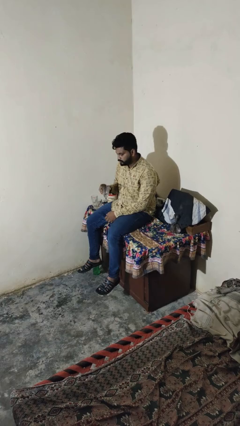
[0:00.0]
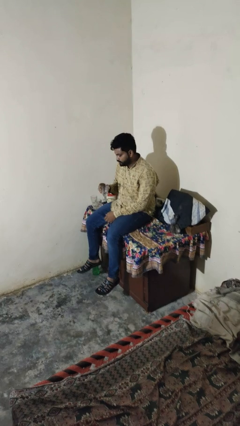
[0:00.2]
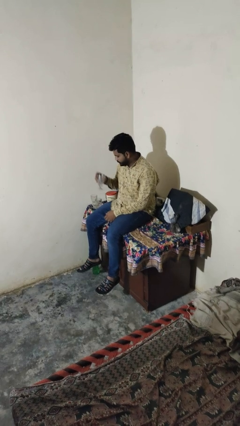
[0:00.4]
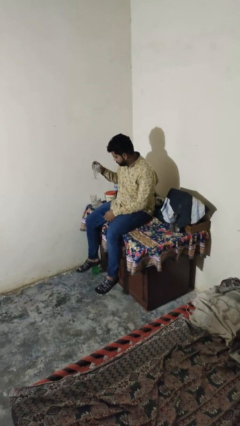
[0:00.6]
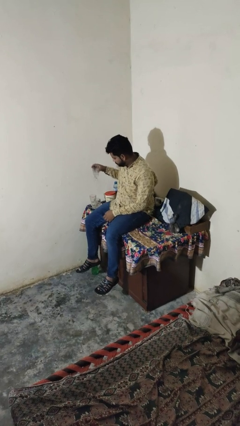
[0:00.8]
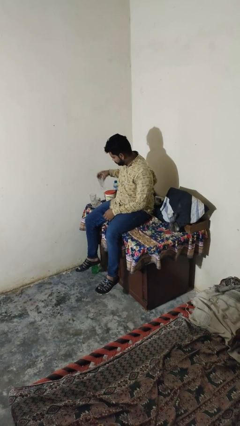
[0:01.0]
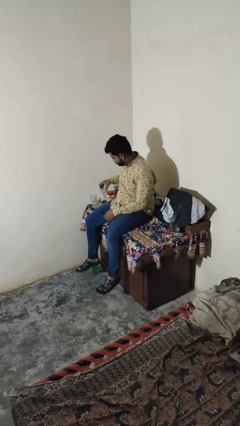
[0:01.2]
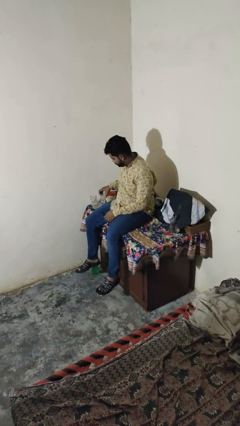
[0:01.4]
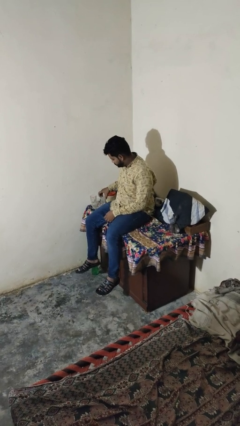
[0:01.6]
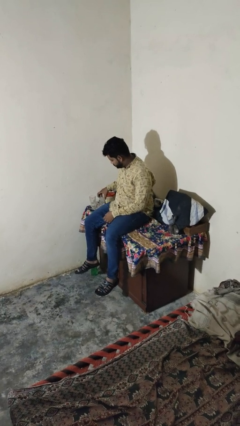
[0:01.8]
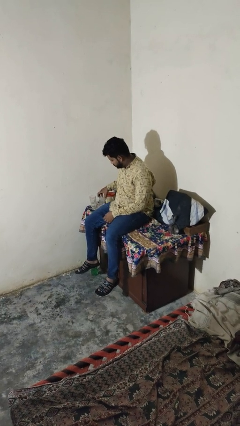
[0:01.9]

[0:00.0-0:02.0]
person puts down object on table

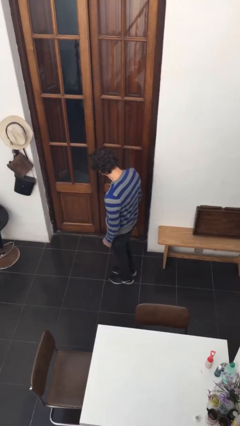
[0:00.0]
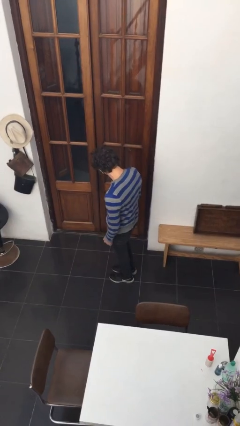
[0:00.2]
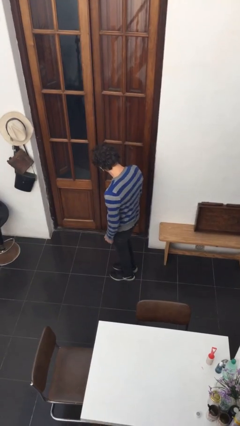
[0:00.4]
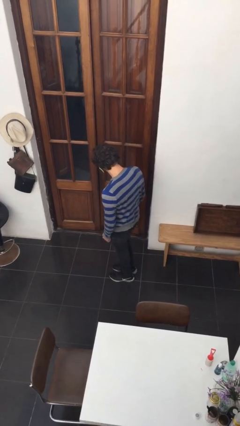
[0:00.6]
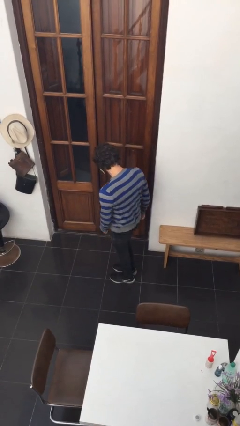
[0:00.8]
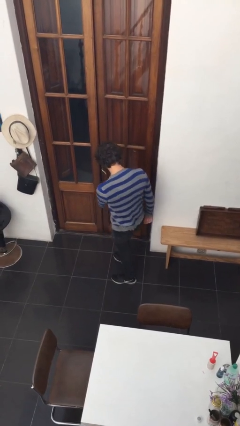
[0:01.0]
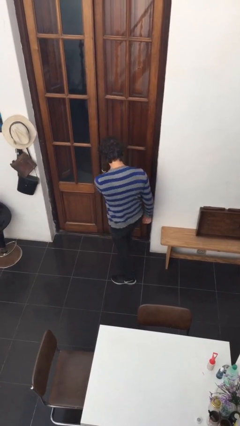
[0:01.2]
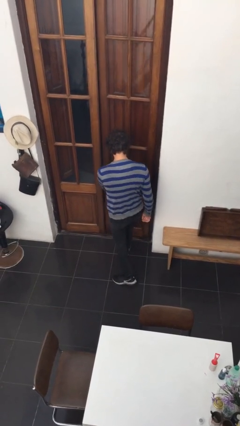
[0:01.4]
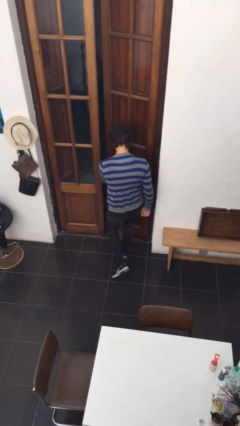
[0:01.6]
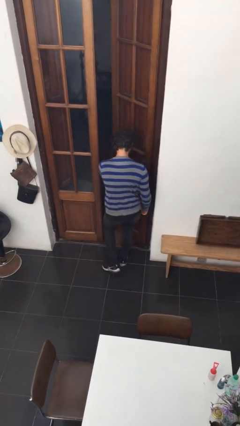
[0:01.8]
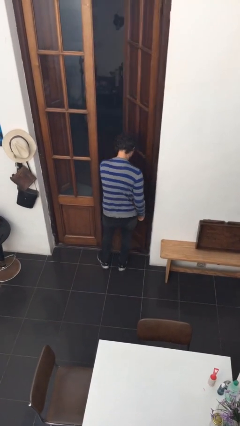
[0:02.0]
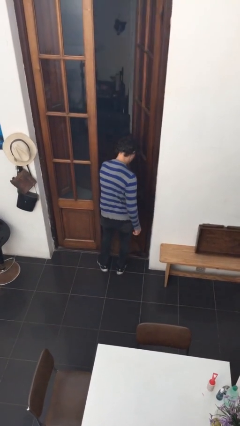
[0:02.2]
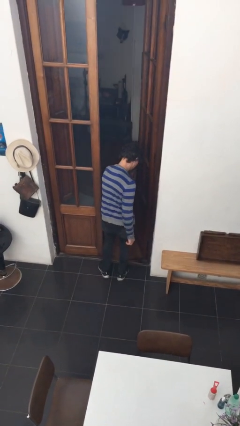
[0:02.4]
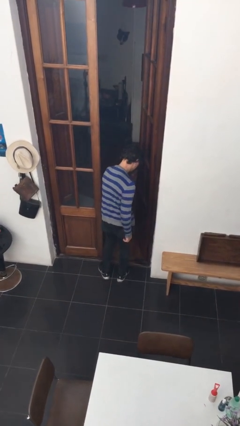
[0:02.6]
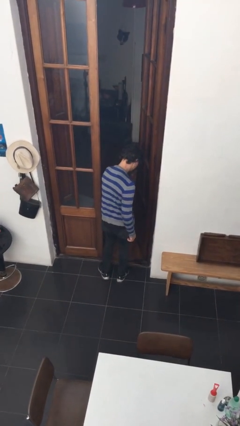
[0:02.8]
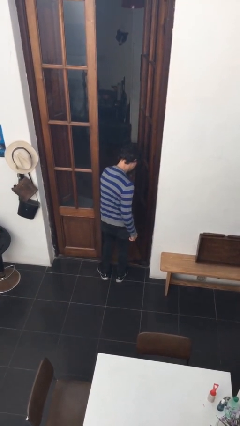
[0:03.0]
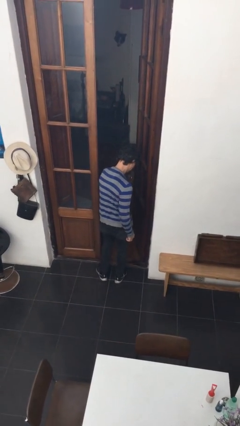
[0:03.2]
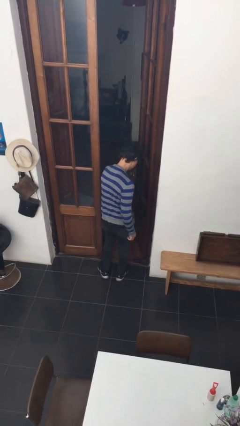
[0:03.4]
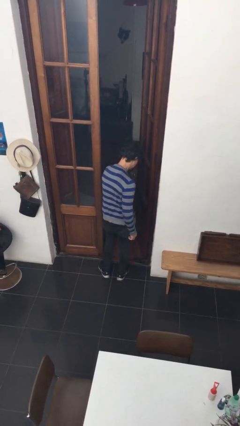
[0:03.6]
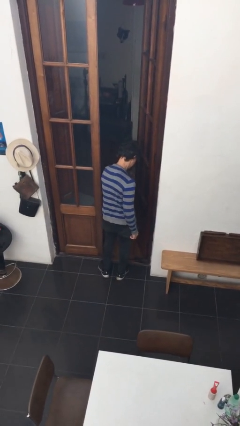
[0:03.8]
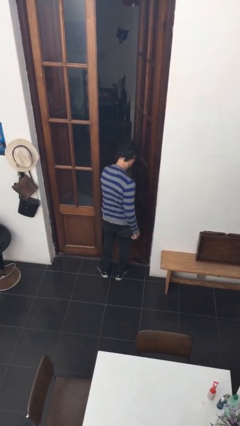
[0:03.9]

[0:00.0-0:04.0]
person opens facility door

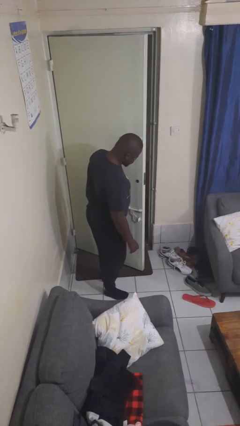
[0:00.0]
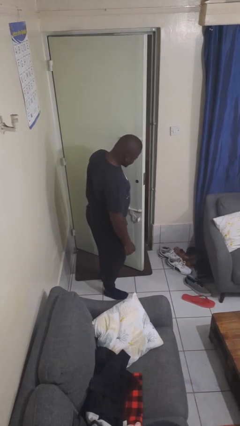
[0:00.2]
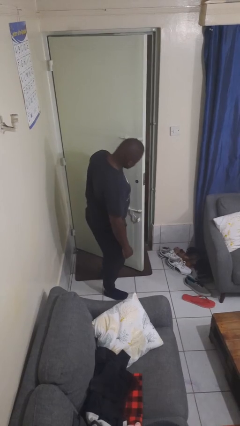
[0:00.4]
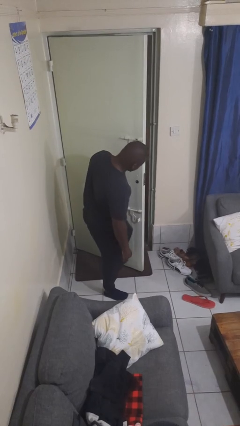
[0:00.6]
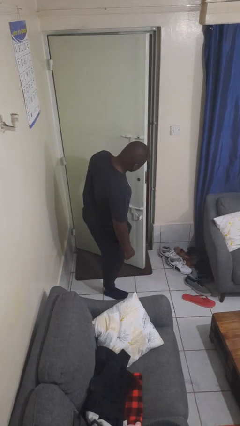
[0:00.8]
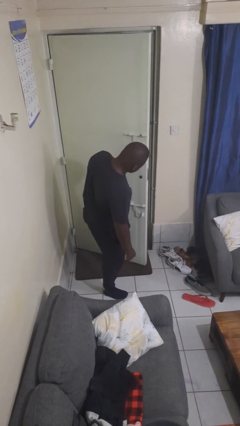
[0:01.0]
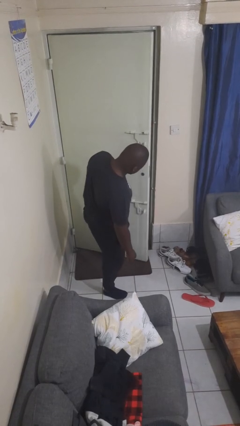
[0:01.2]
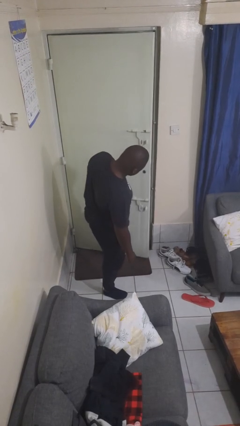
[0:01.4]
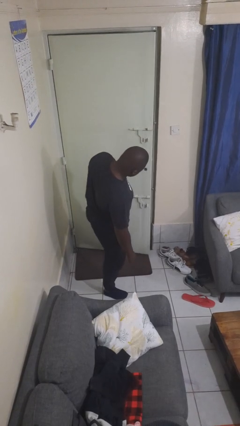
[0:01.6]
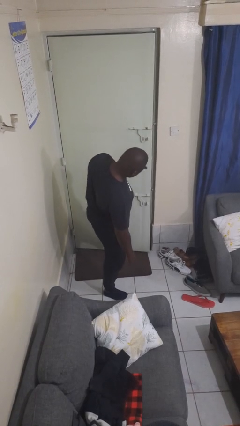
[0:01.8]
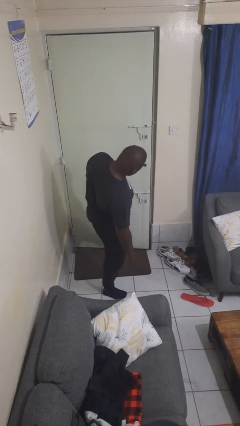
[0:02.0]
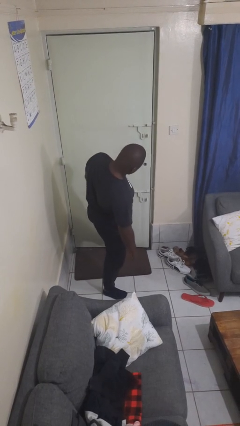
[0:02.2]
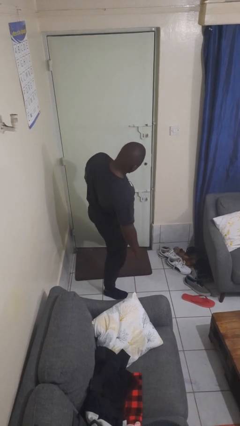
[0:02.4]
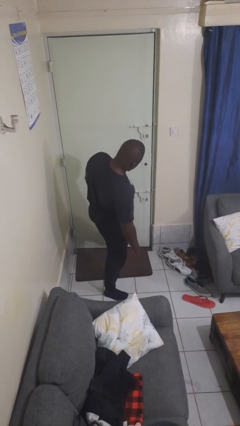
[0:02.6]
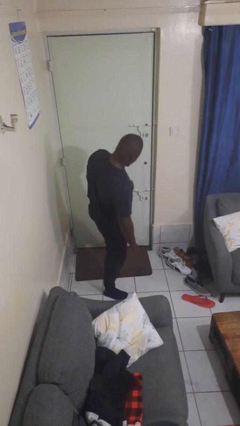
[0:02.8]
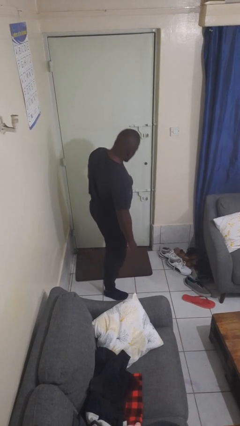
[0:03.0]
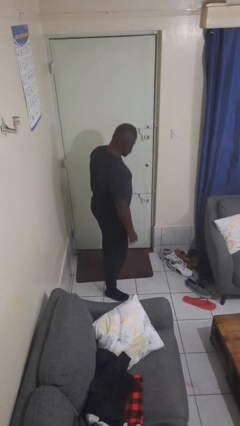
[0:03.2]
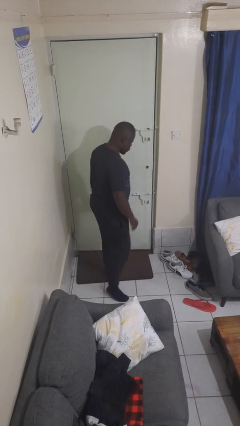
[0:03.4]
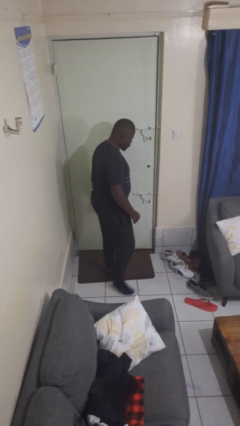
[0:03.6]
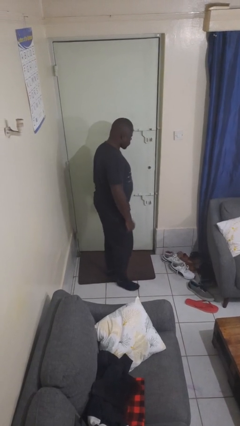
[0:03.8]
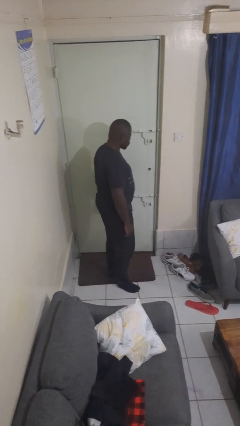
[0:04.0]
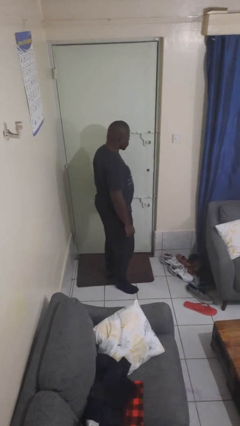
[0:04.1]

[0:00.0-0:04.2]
person closes door with foot

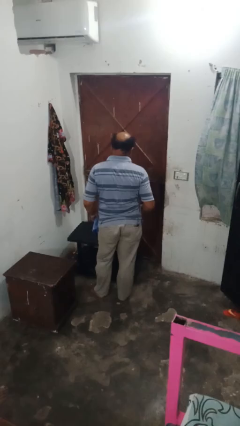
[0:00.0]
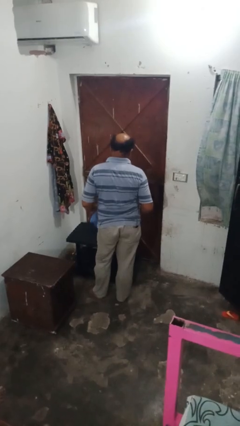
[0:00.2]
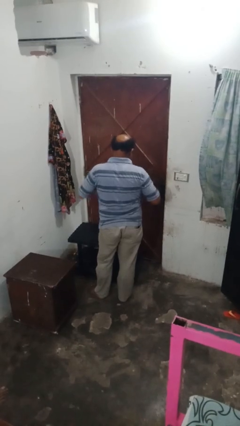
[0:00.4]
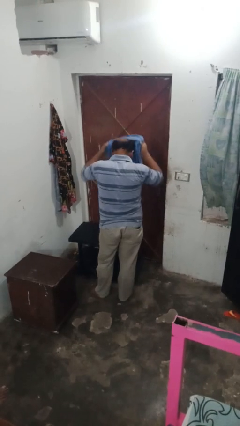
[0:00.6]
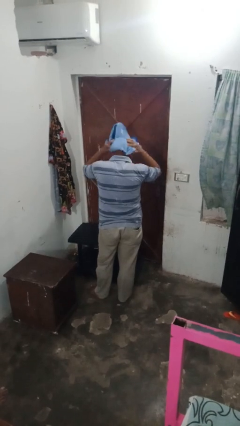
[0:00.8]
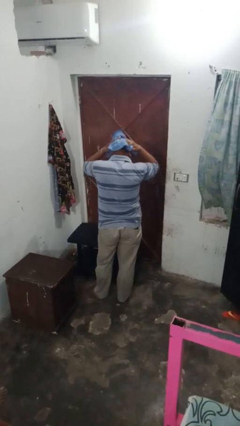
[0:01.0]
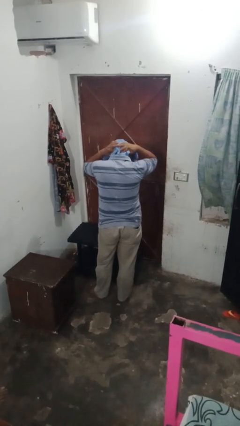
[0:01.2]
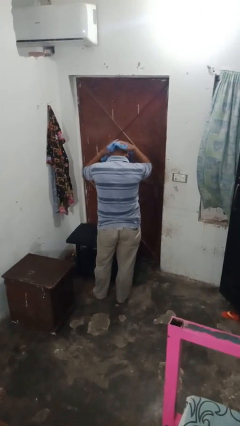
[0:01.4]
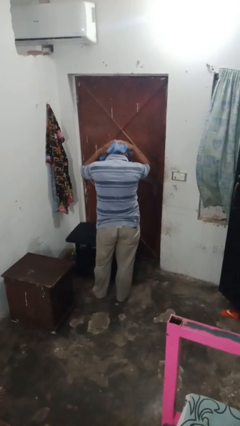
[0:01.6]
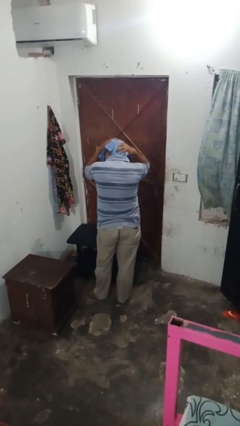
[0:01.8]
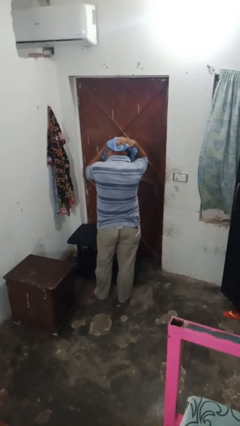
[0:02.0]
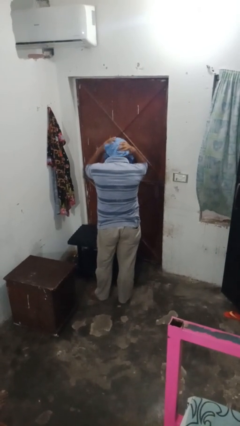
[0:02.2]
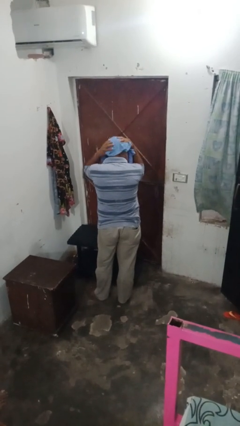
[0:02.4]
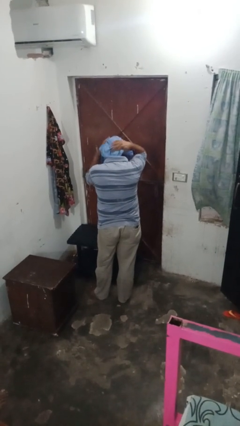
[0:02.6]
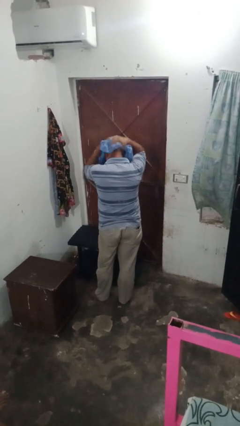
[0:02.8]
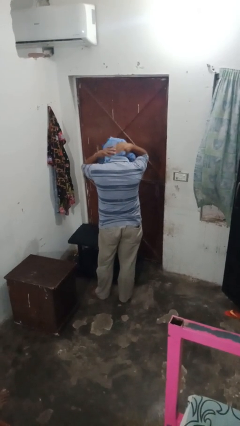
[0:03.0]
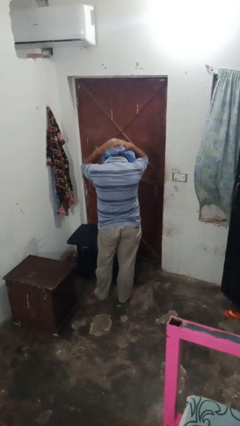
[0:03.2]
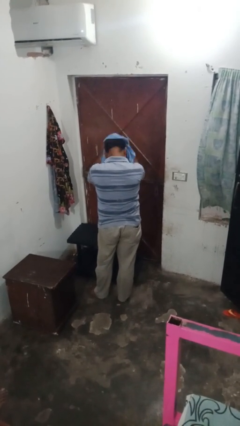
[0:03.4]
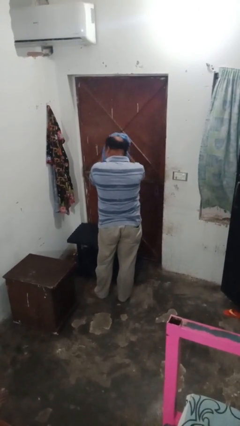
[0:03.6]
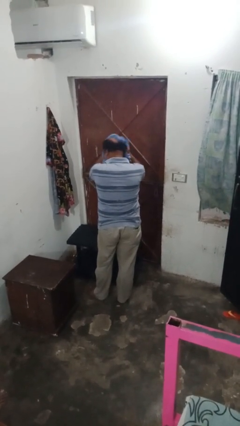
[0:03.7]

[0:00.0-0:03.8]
person dries hair with towel

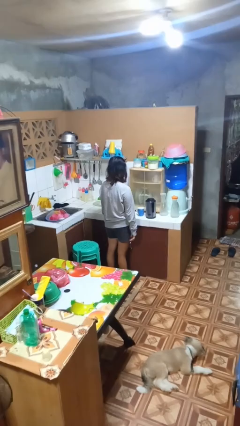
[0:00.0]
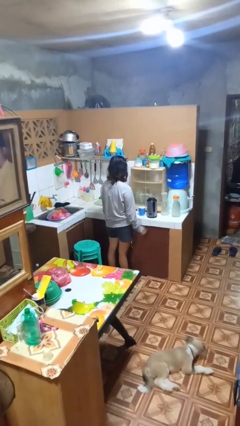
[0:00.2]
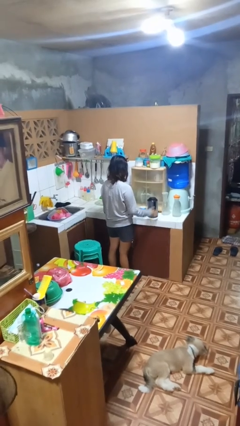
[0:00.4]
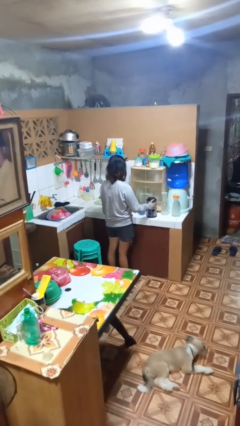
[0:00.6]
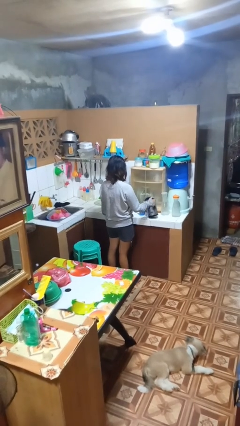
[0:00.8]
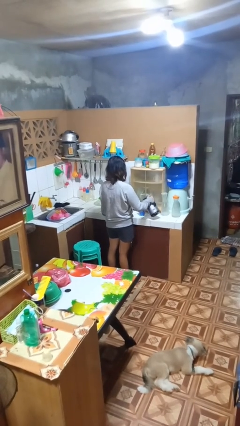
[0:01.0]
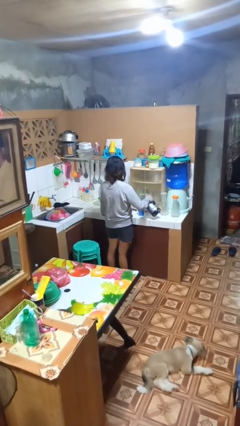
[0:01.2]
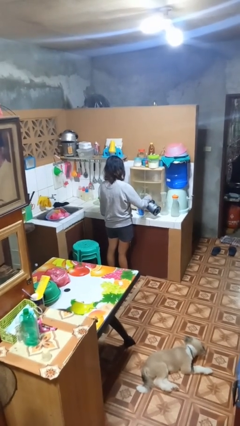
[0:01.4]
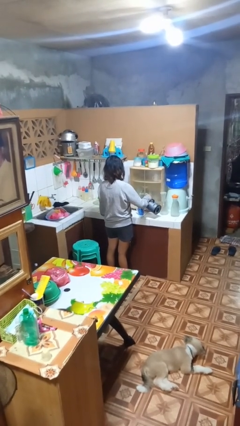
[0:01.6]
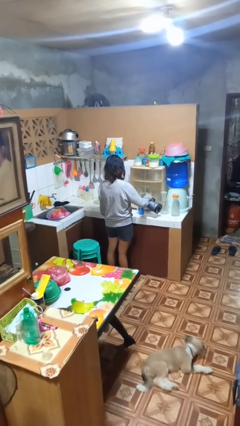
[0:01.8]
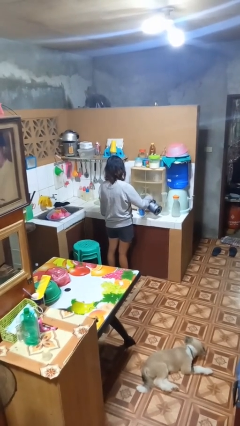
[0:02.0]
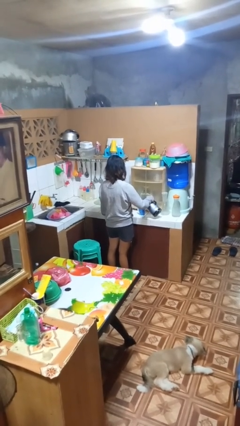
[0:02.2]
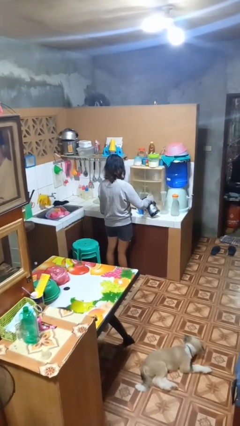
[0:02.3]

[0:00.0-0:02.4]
person pours coffee into mug

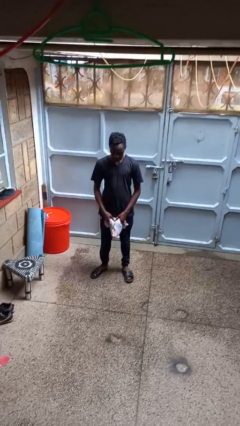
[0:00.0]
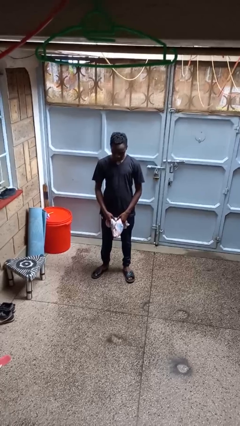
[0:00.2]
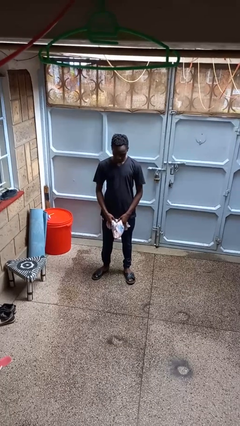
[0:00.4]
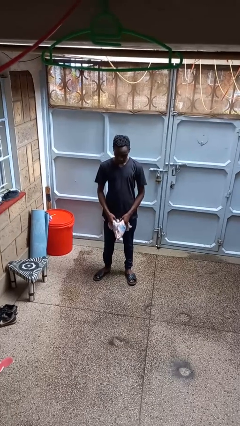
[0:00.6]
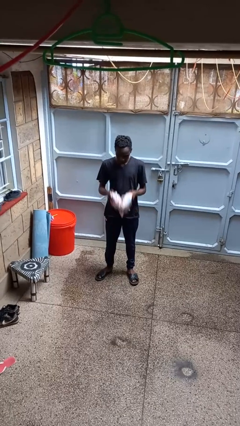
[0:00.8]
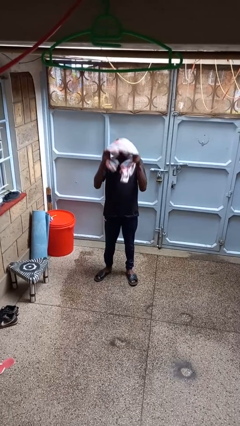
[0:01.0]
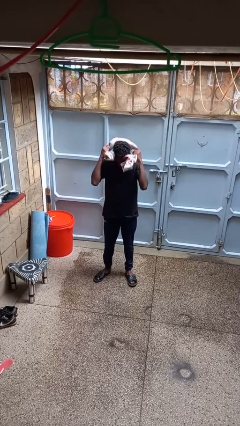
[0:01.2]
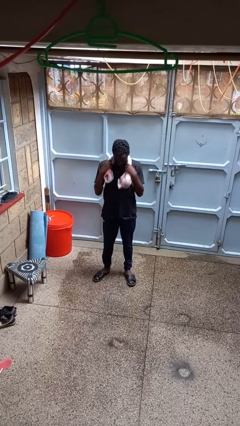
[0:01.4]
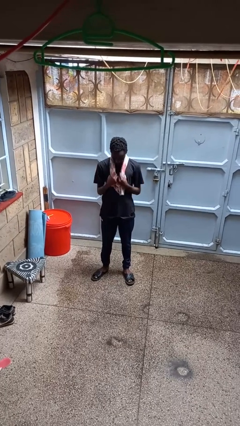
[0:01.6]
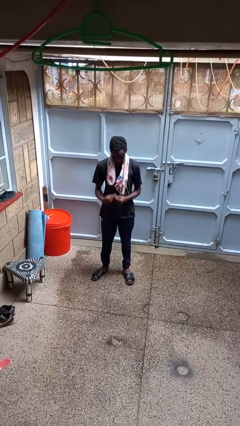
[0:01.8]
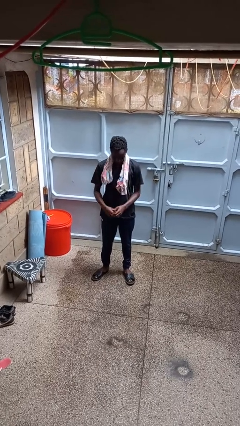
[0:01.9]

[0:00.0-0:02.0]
person puts on scarf
